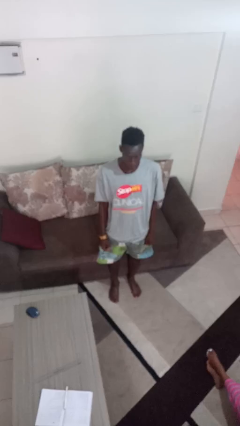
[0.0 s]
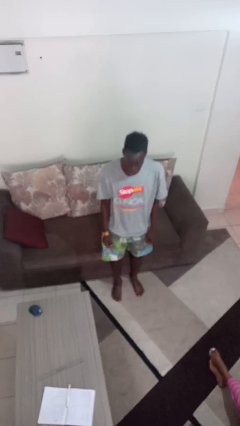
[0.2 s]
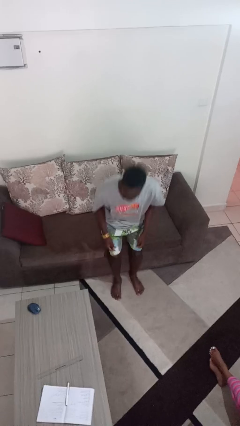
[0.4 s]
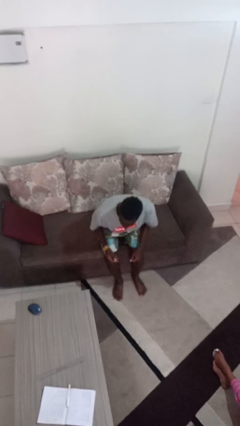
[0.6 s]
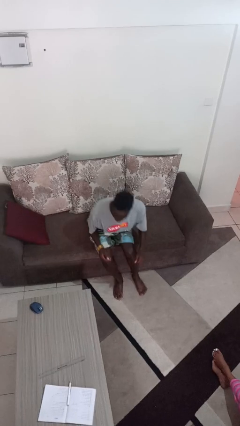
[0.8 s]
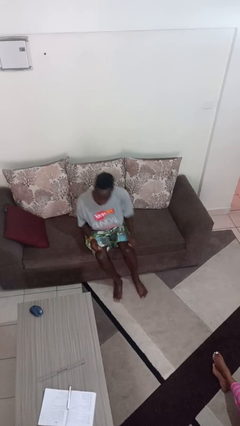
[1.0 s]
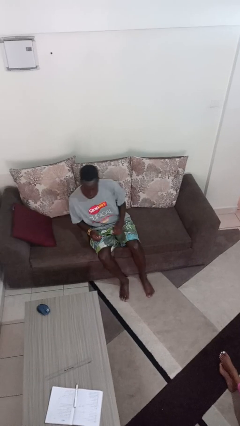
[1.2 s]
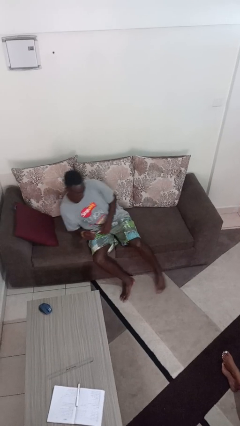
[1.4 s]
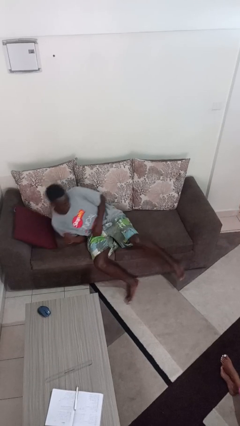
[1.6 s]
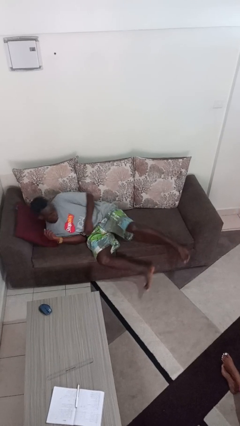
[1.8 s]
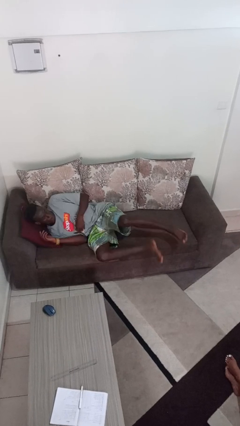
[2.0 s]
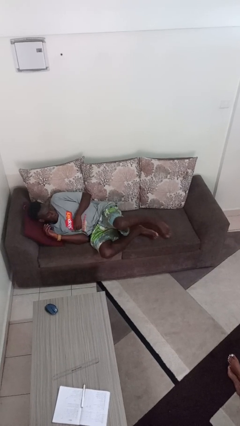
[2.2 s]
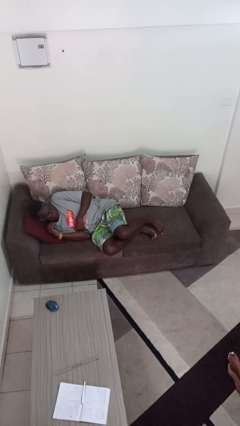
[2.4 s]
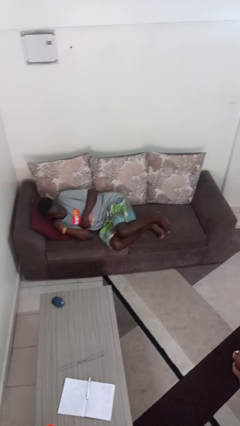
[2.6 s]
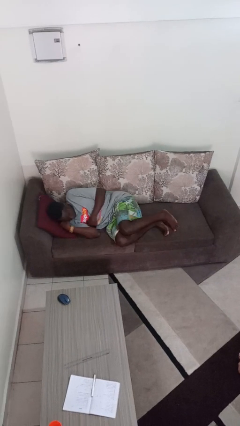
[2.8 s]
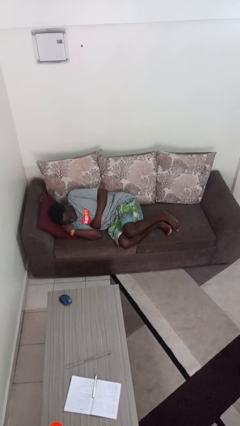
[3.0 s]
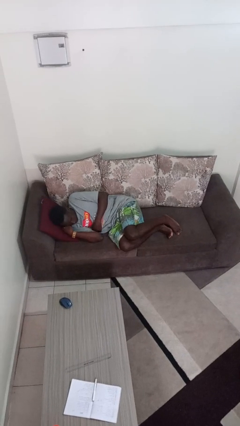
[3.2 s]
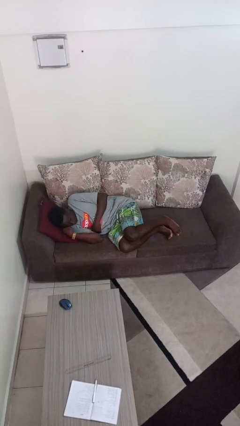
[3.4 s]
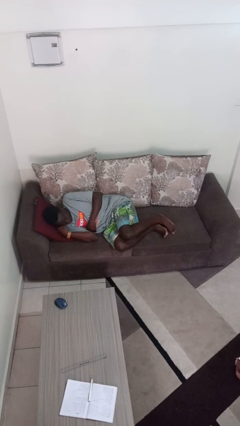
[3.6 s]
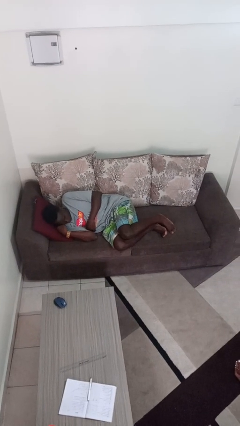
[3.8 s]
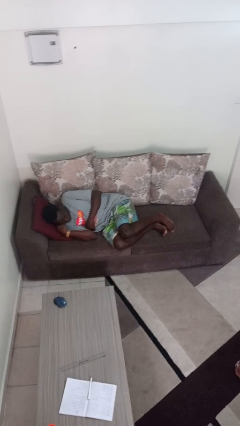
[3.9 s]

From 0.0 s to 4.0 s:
person lies down on couch

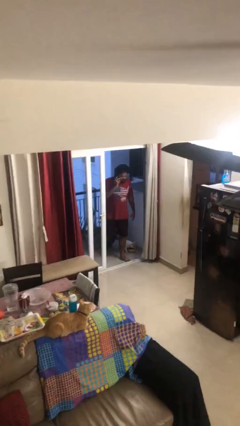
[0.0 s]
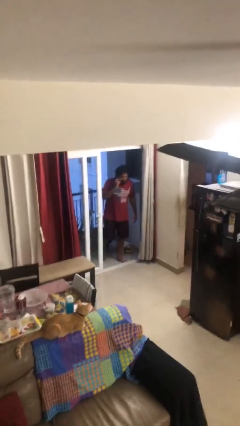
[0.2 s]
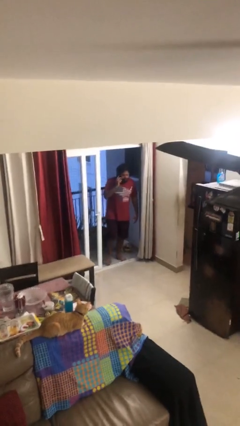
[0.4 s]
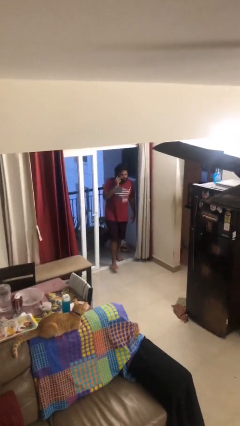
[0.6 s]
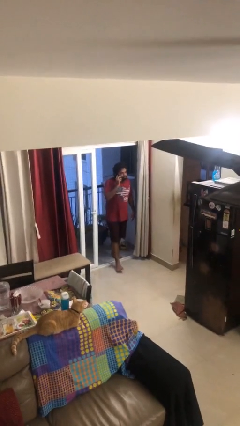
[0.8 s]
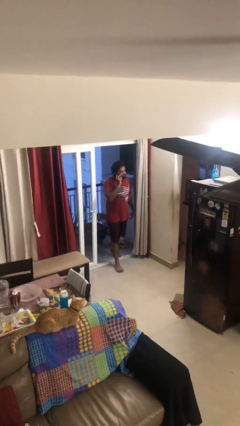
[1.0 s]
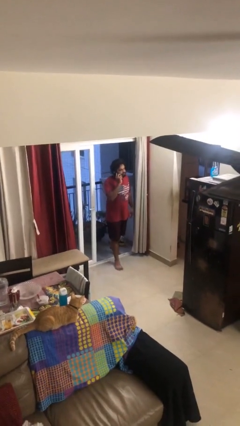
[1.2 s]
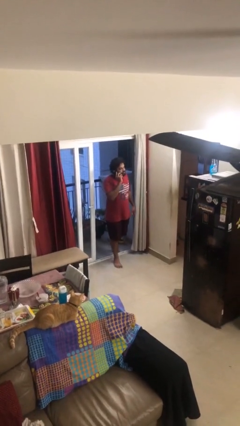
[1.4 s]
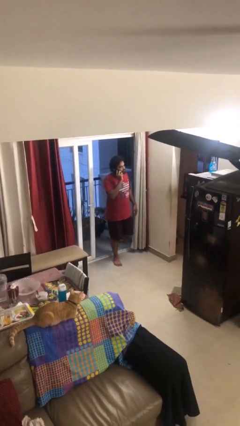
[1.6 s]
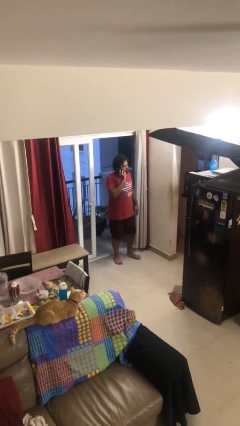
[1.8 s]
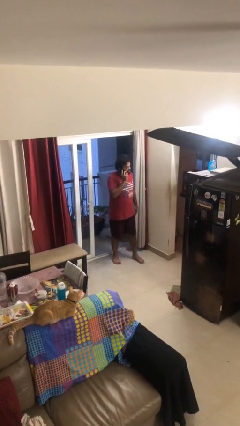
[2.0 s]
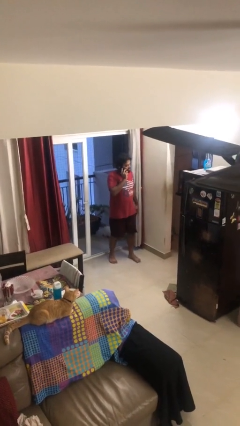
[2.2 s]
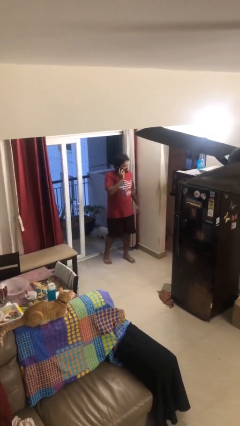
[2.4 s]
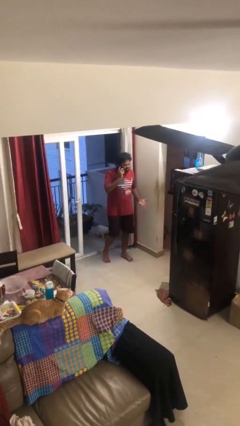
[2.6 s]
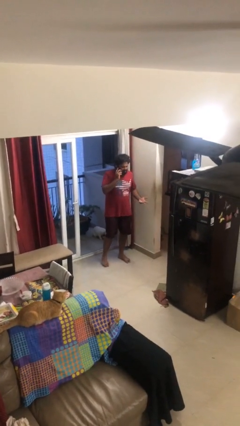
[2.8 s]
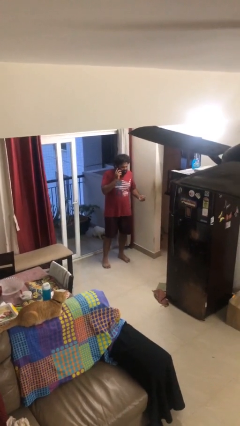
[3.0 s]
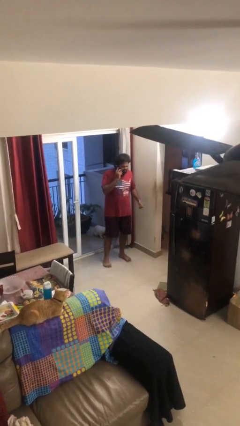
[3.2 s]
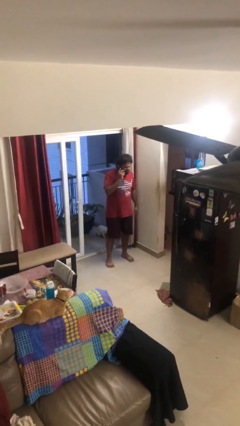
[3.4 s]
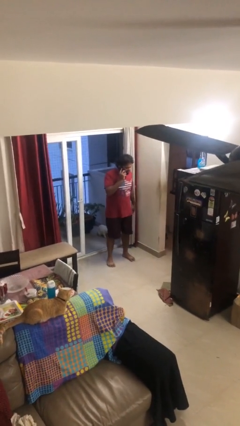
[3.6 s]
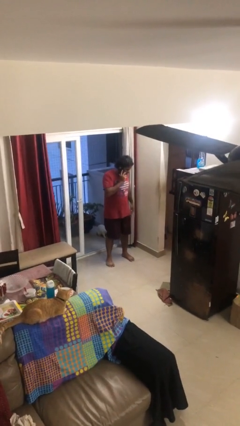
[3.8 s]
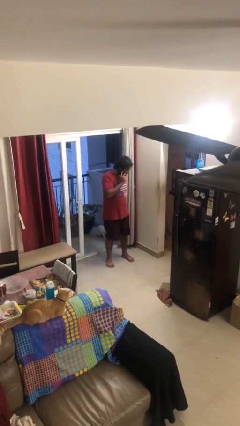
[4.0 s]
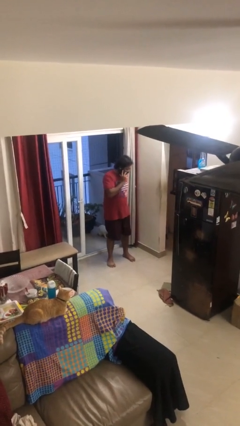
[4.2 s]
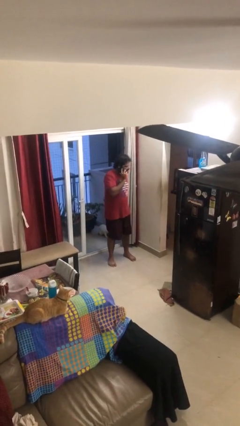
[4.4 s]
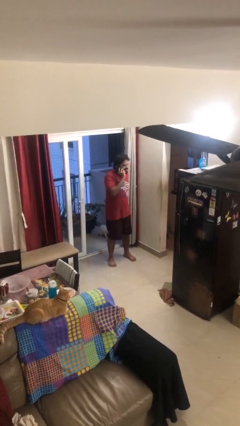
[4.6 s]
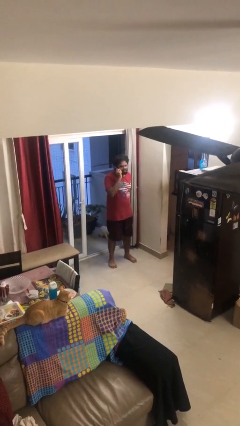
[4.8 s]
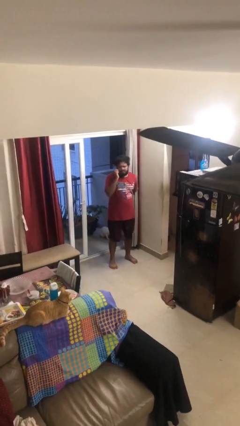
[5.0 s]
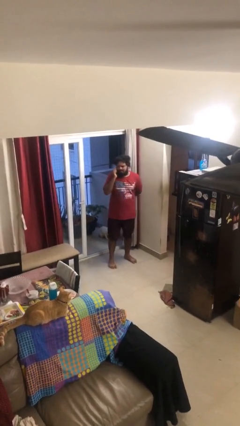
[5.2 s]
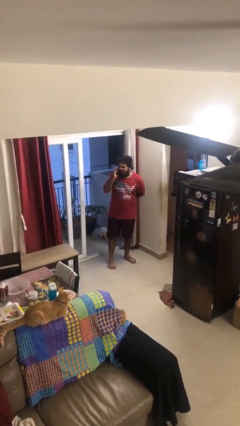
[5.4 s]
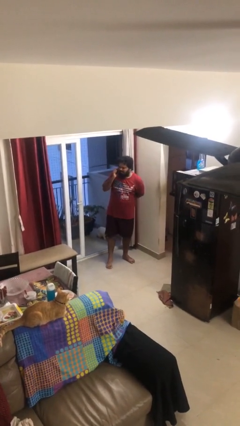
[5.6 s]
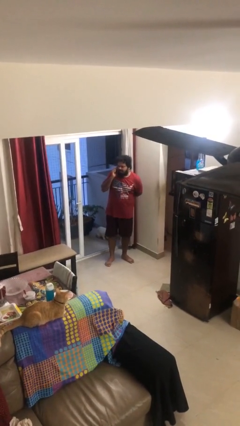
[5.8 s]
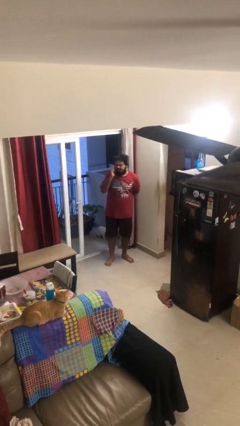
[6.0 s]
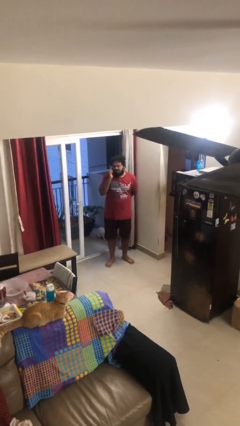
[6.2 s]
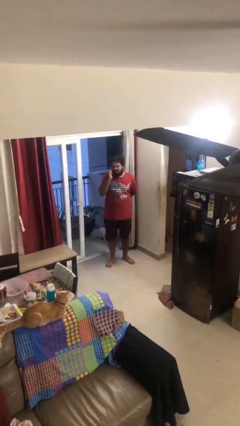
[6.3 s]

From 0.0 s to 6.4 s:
person enters scene through structure

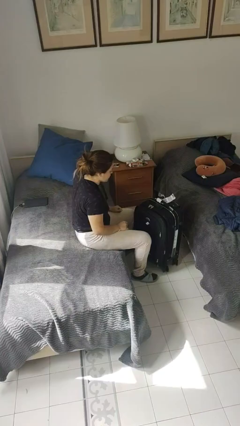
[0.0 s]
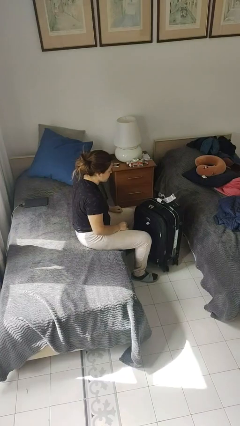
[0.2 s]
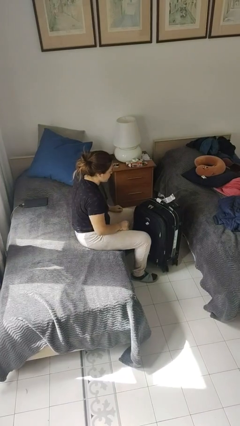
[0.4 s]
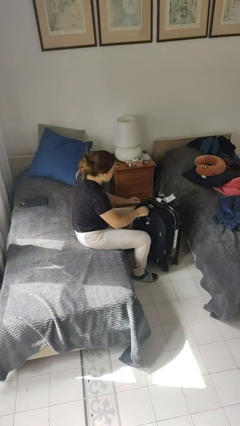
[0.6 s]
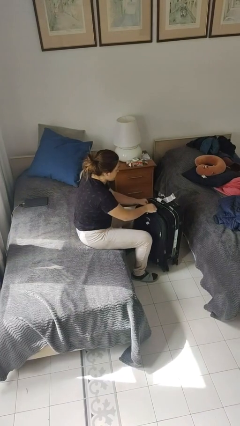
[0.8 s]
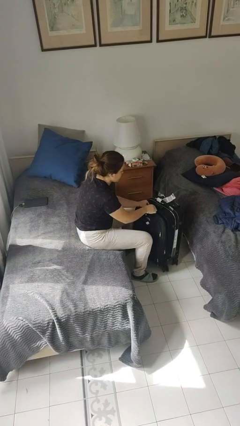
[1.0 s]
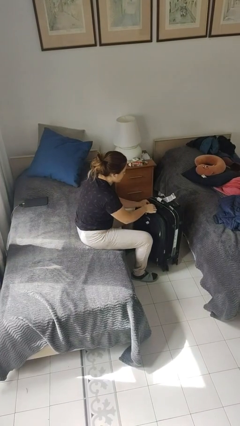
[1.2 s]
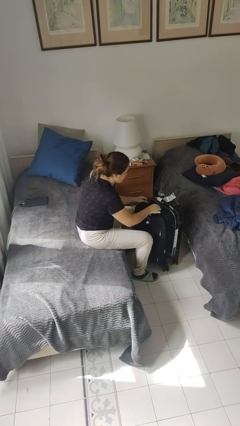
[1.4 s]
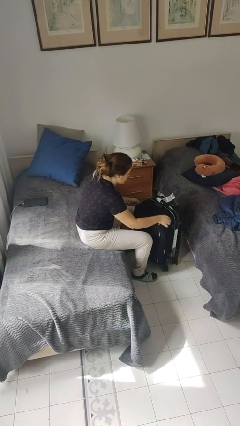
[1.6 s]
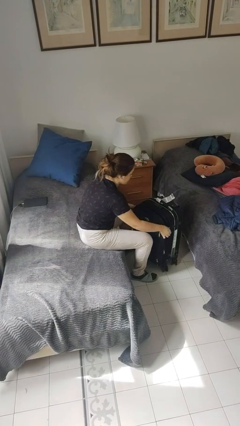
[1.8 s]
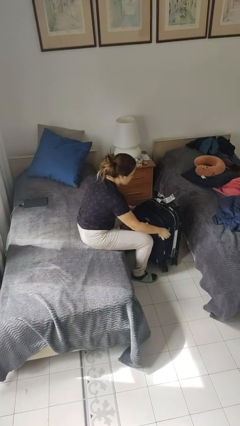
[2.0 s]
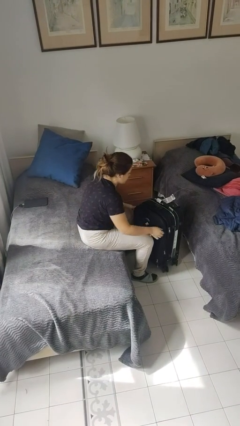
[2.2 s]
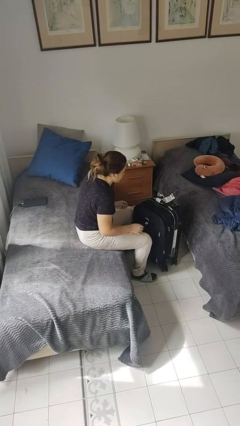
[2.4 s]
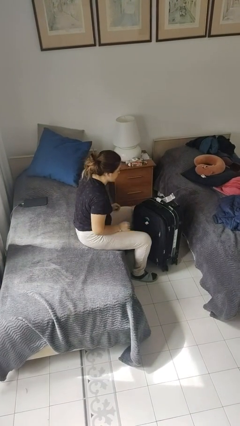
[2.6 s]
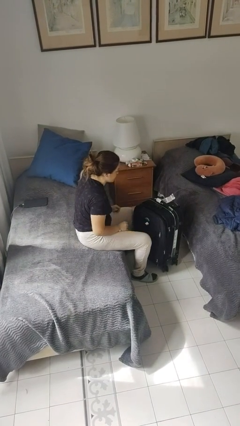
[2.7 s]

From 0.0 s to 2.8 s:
person opens suitcase

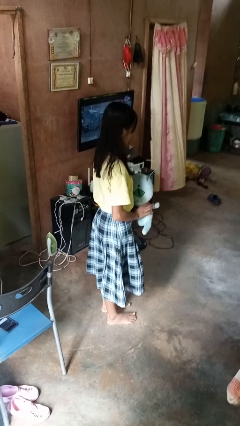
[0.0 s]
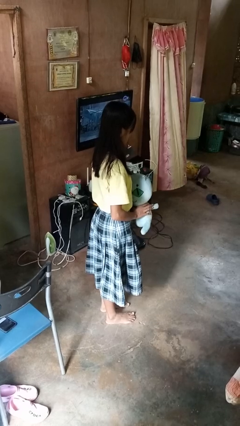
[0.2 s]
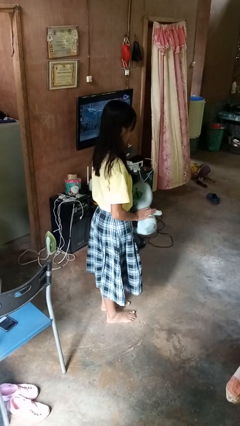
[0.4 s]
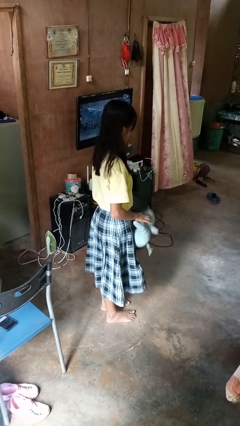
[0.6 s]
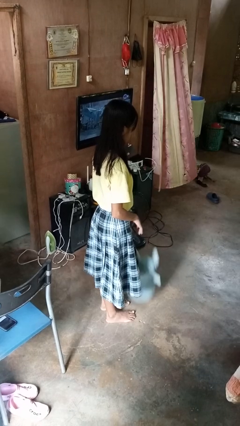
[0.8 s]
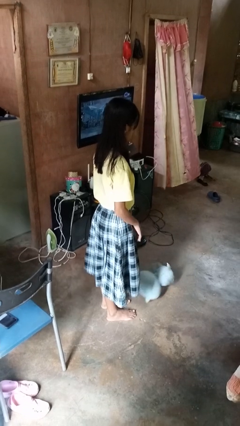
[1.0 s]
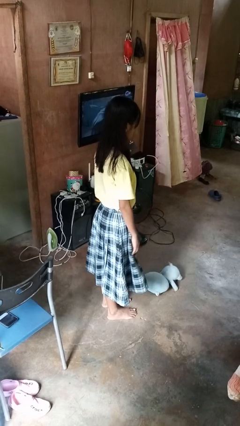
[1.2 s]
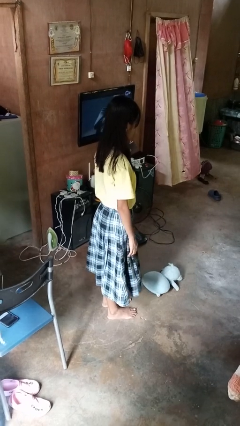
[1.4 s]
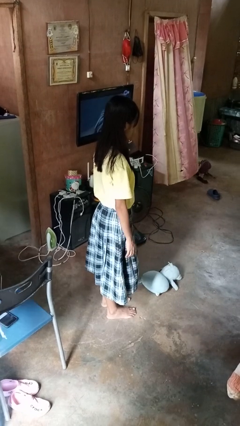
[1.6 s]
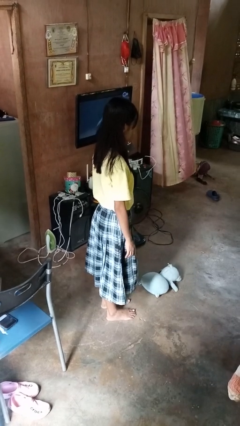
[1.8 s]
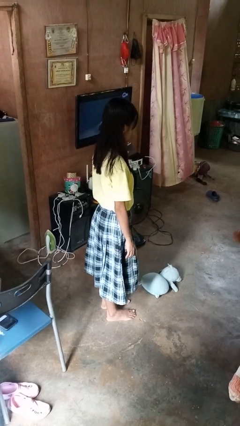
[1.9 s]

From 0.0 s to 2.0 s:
person drops object

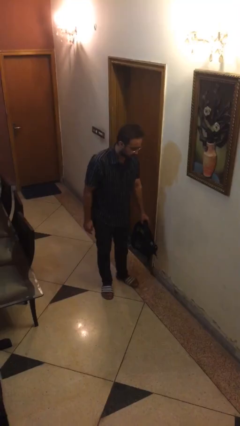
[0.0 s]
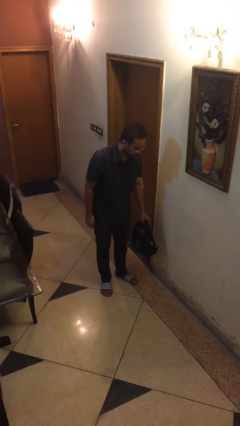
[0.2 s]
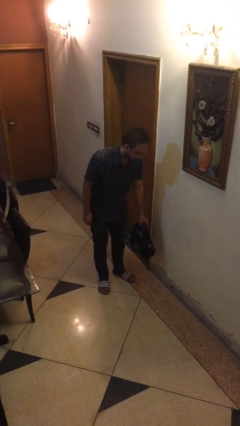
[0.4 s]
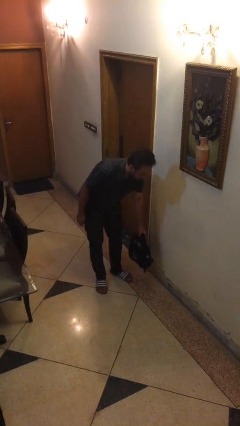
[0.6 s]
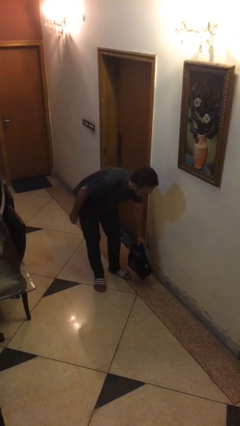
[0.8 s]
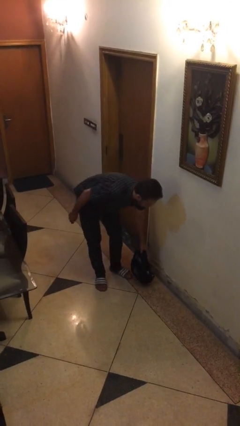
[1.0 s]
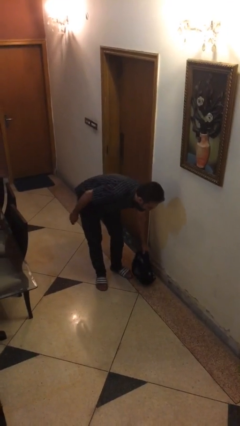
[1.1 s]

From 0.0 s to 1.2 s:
person puts down object on floor

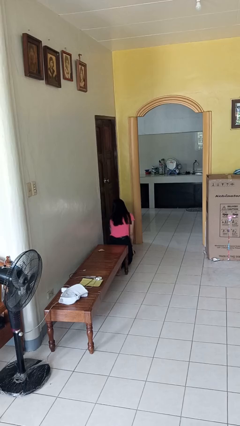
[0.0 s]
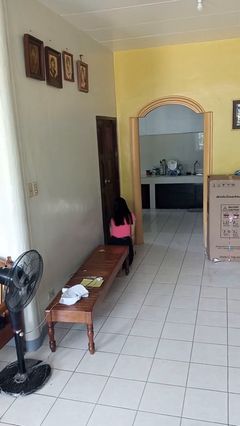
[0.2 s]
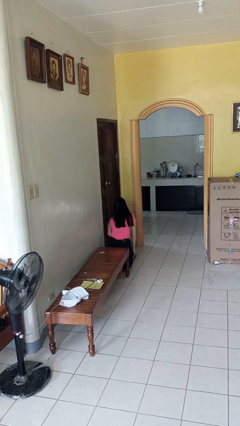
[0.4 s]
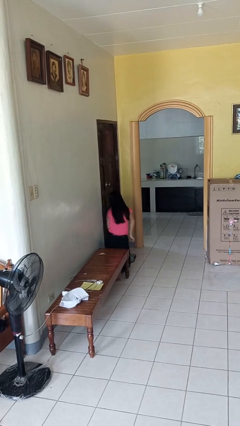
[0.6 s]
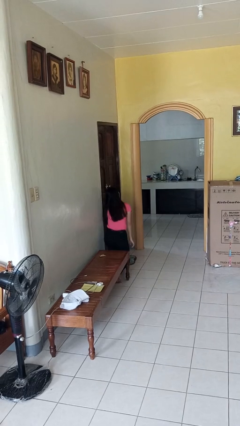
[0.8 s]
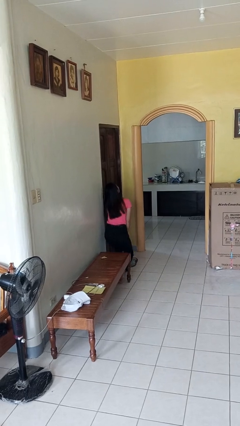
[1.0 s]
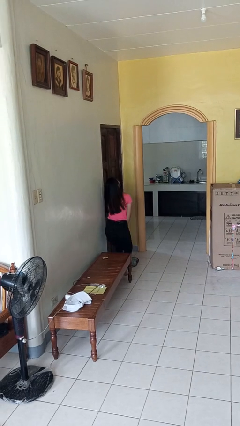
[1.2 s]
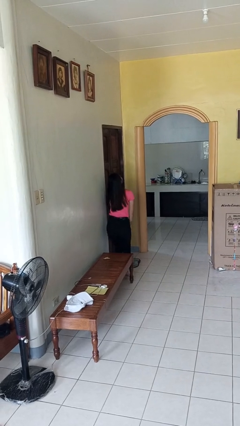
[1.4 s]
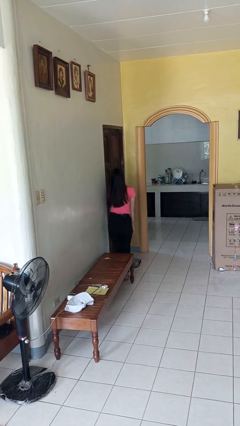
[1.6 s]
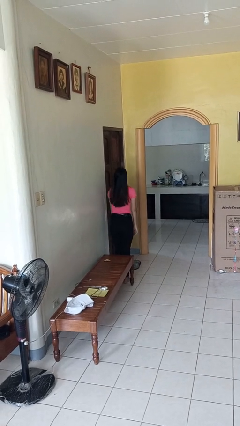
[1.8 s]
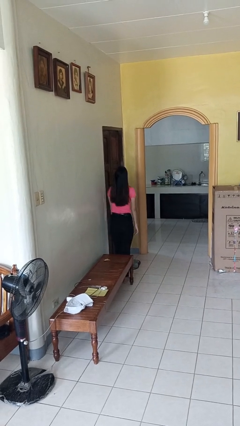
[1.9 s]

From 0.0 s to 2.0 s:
person stands up from floor
